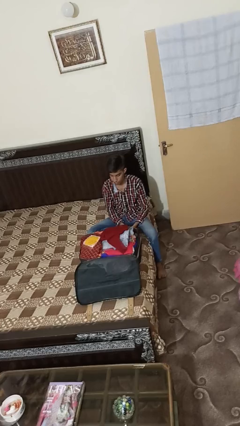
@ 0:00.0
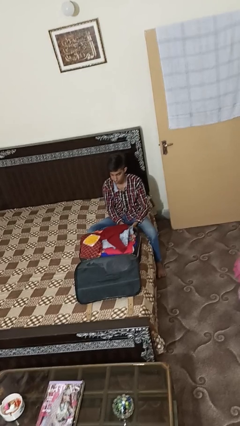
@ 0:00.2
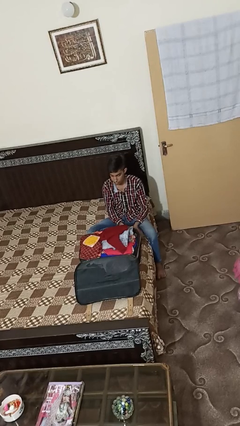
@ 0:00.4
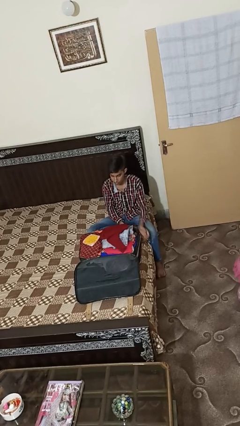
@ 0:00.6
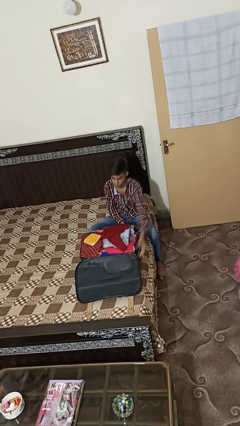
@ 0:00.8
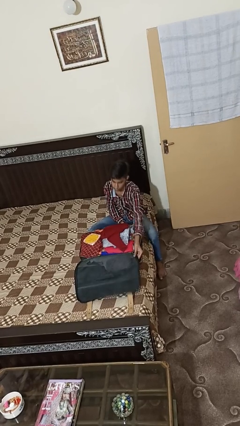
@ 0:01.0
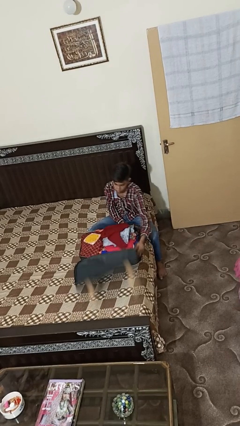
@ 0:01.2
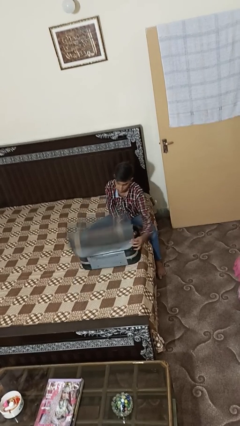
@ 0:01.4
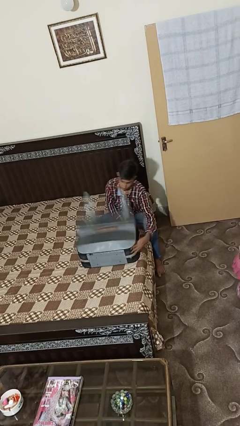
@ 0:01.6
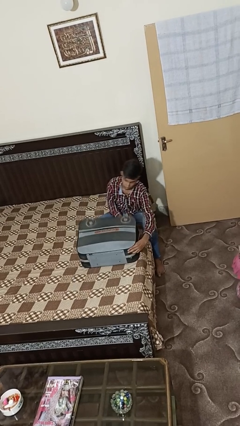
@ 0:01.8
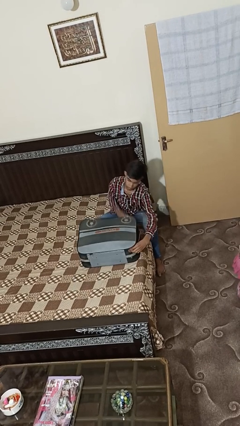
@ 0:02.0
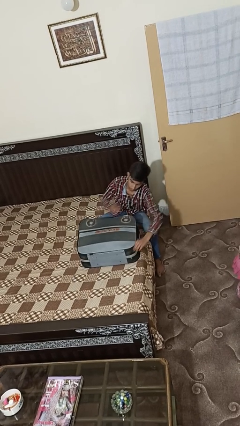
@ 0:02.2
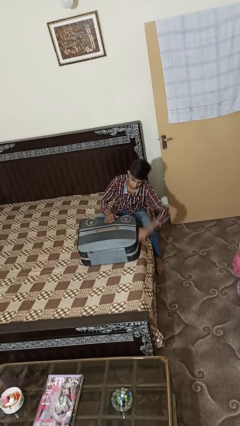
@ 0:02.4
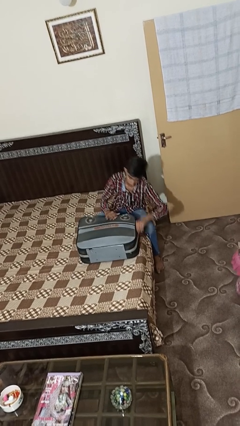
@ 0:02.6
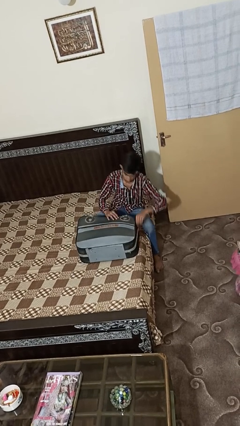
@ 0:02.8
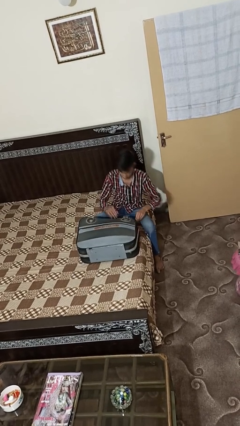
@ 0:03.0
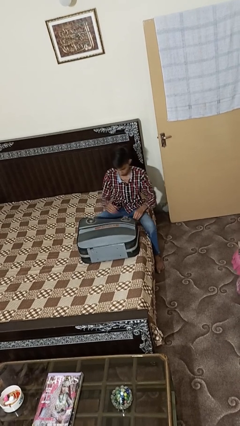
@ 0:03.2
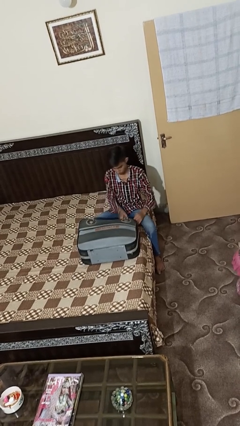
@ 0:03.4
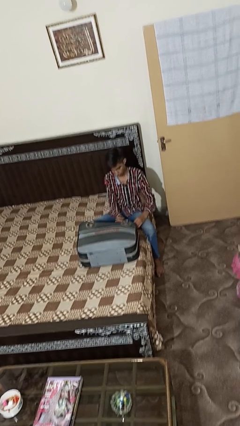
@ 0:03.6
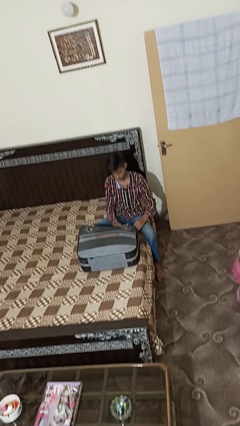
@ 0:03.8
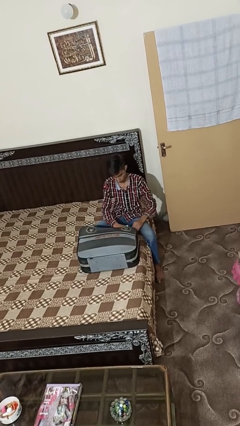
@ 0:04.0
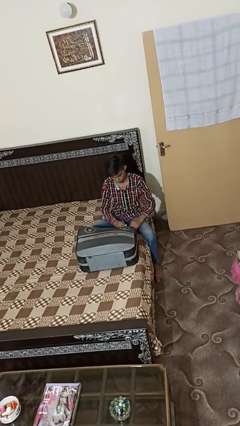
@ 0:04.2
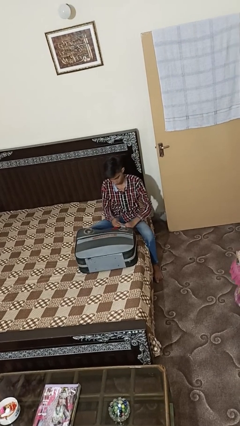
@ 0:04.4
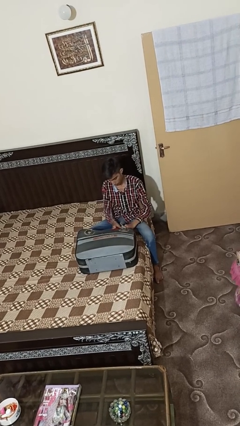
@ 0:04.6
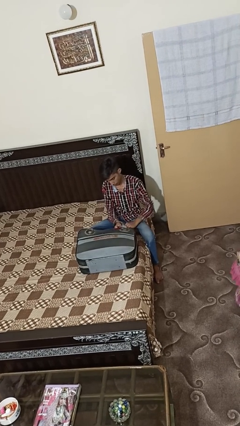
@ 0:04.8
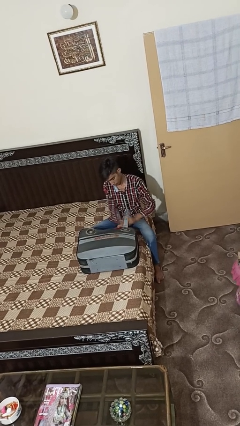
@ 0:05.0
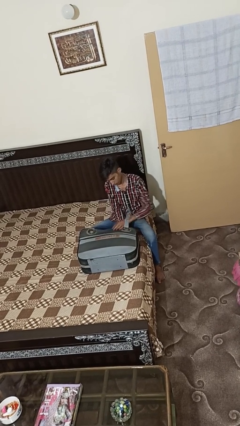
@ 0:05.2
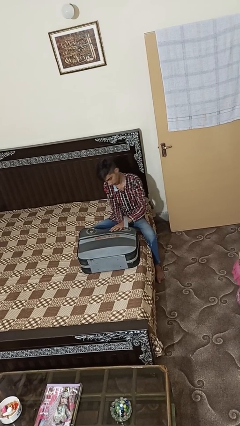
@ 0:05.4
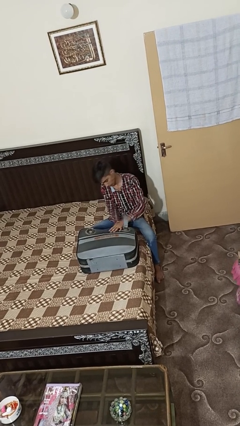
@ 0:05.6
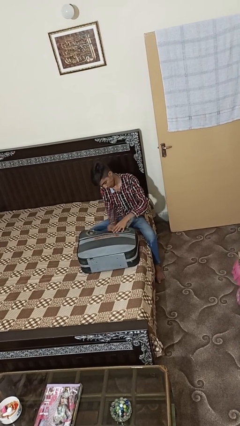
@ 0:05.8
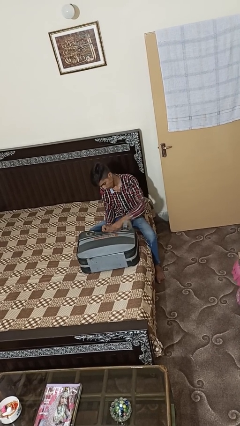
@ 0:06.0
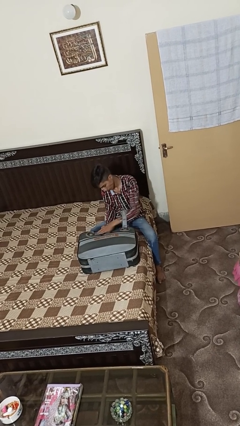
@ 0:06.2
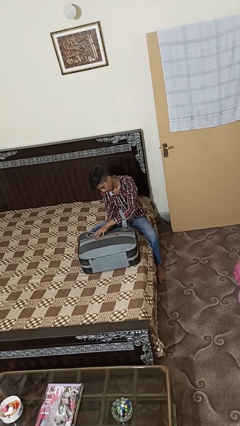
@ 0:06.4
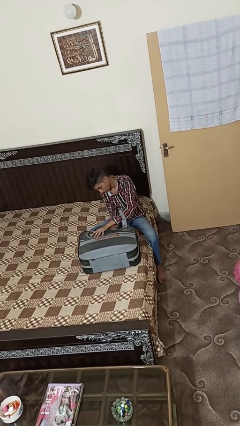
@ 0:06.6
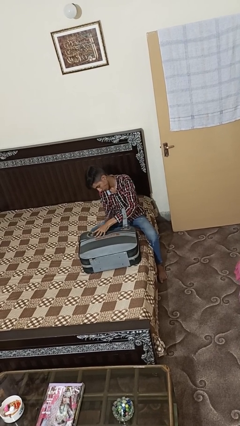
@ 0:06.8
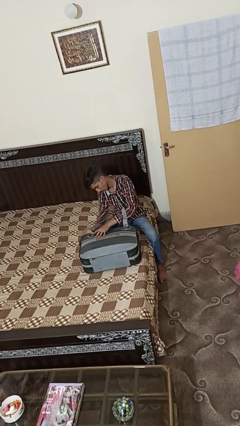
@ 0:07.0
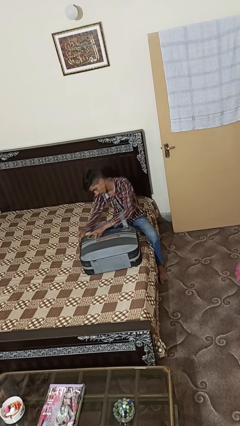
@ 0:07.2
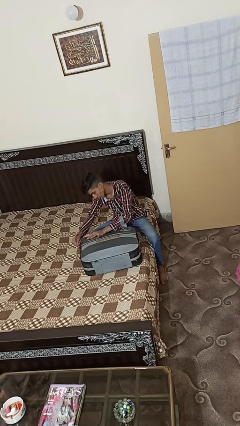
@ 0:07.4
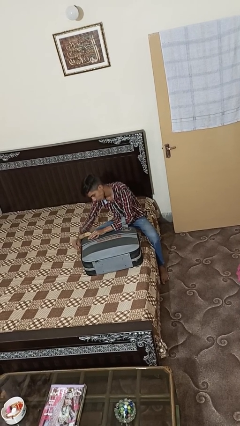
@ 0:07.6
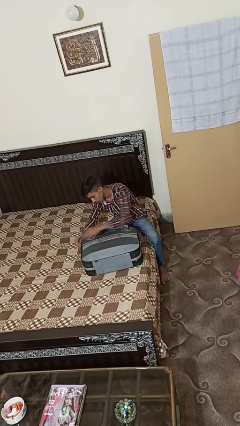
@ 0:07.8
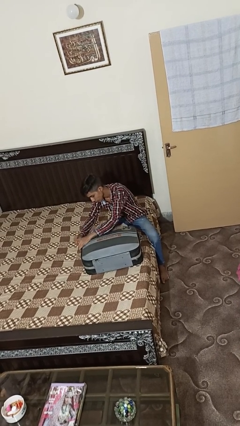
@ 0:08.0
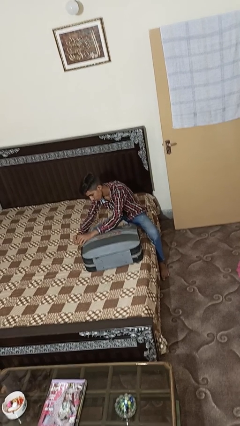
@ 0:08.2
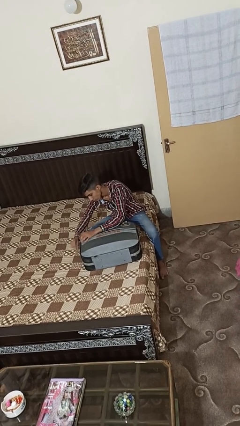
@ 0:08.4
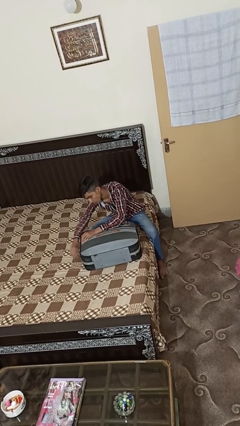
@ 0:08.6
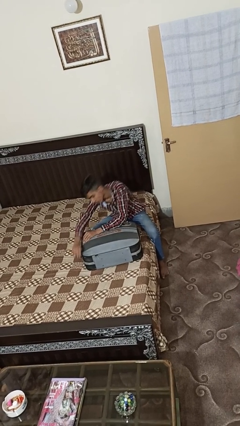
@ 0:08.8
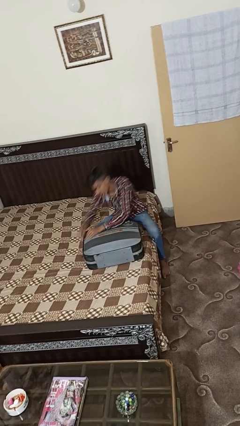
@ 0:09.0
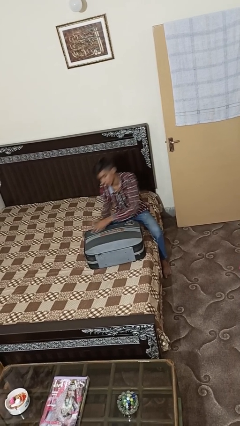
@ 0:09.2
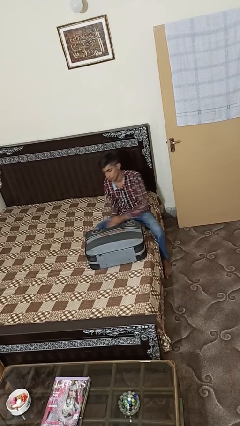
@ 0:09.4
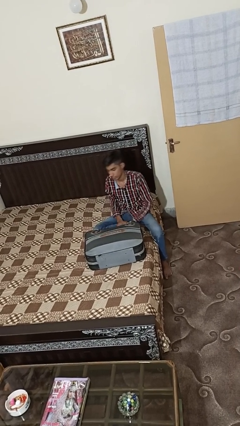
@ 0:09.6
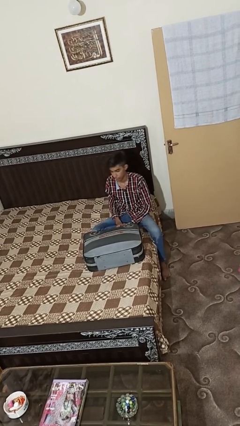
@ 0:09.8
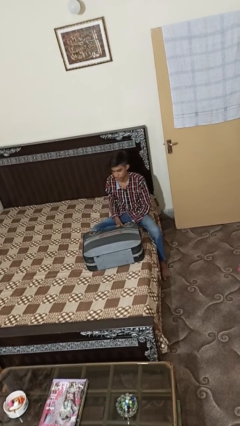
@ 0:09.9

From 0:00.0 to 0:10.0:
person closes suitcase

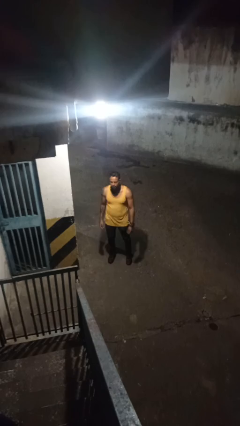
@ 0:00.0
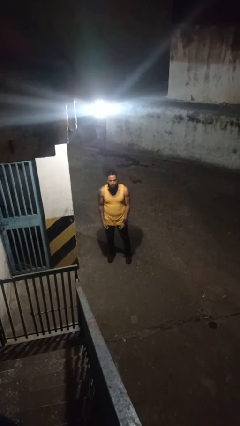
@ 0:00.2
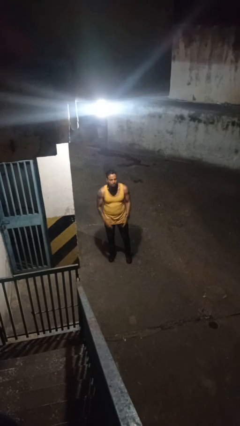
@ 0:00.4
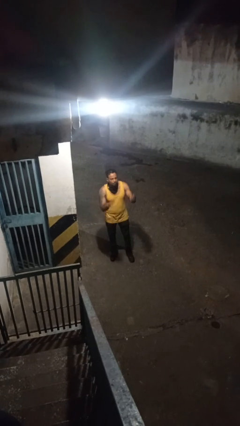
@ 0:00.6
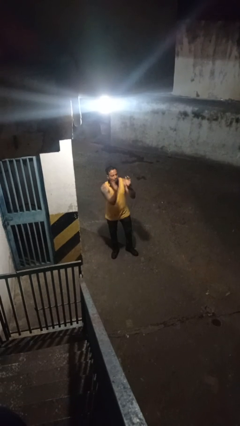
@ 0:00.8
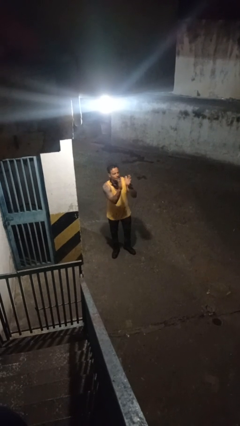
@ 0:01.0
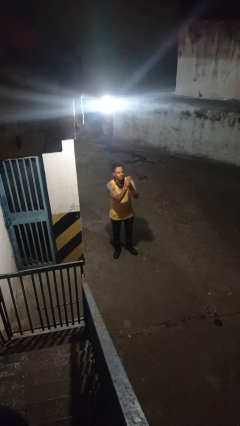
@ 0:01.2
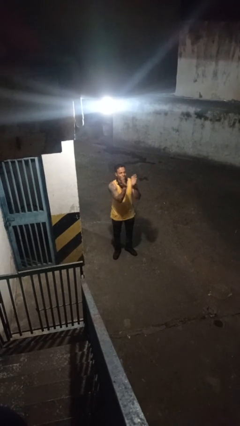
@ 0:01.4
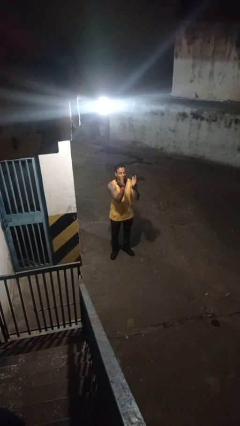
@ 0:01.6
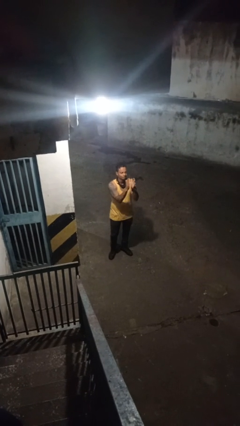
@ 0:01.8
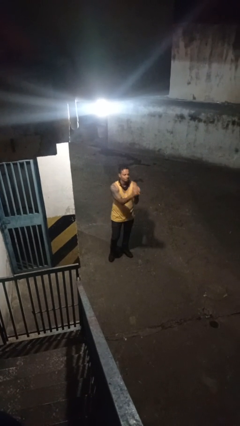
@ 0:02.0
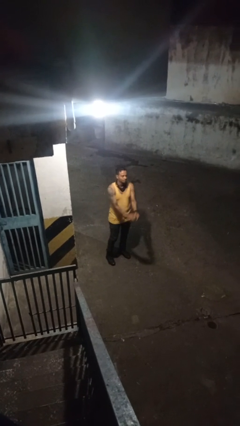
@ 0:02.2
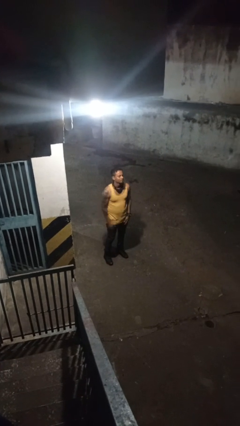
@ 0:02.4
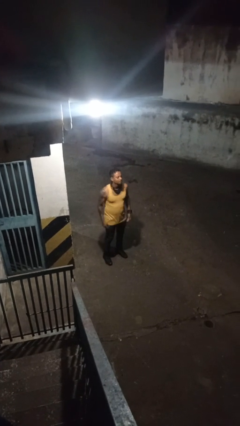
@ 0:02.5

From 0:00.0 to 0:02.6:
person claps hands

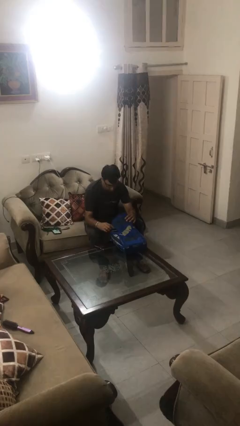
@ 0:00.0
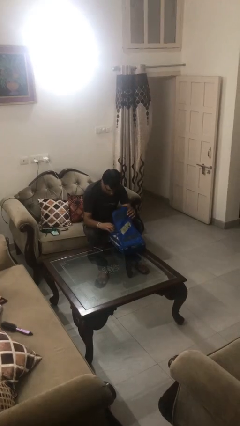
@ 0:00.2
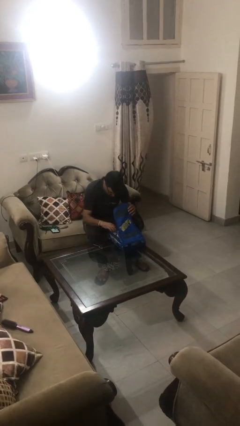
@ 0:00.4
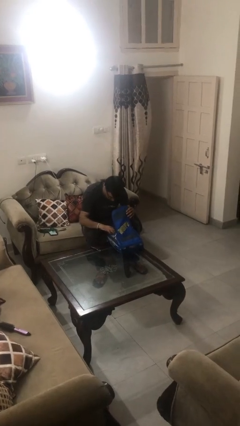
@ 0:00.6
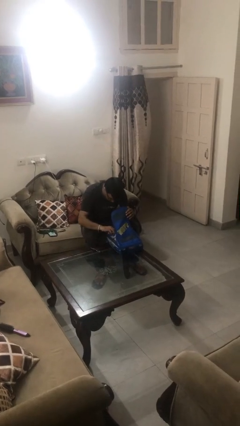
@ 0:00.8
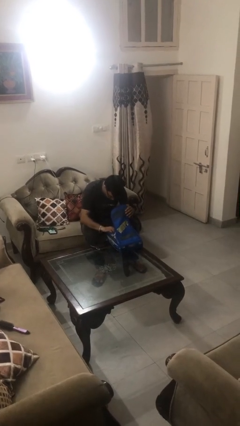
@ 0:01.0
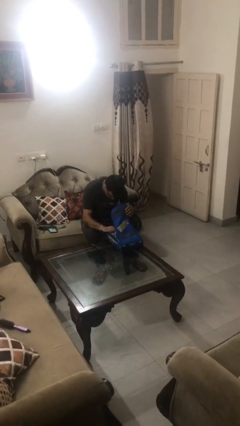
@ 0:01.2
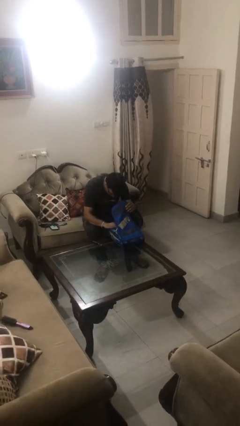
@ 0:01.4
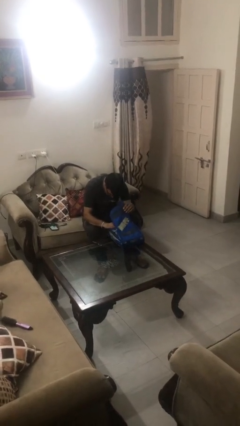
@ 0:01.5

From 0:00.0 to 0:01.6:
person searches in backpack

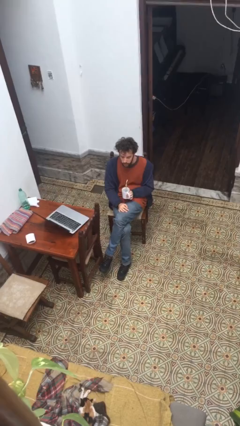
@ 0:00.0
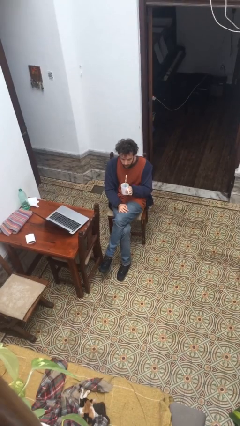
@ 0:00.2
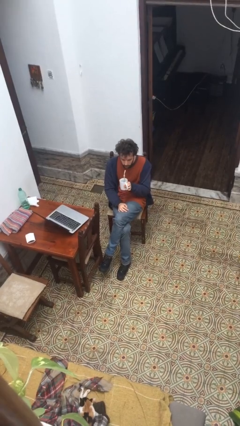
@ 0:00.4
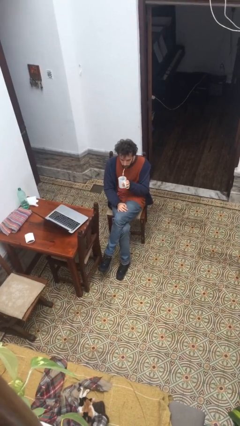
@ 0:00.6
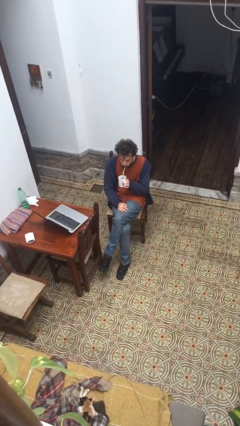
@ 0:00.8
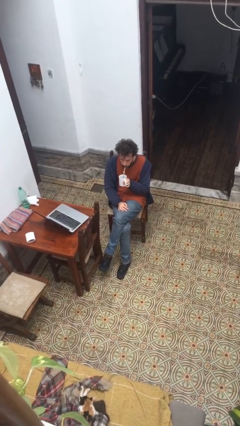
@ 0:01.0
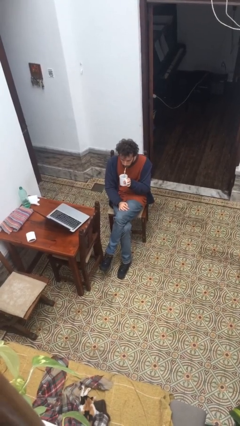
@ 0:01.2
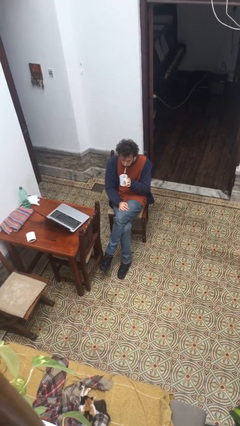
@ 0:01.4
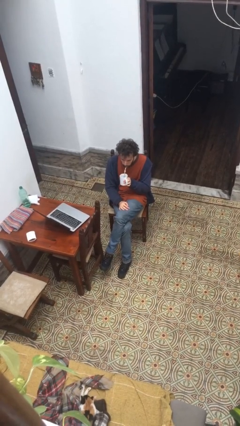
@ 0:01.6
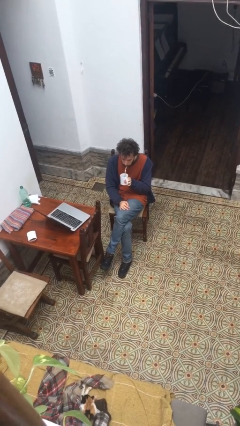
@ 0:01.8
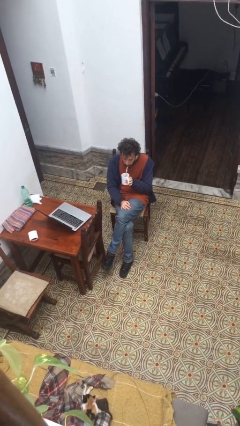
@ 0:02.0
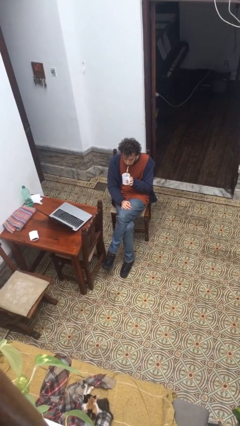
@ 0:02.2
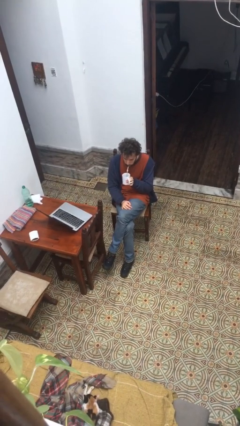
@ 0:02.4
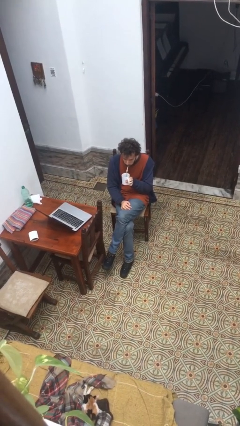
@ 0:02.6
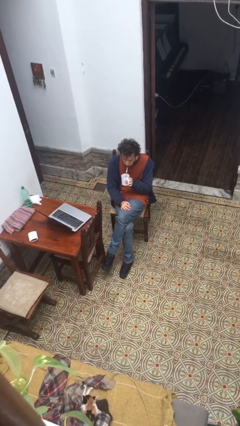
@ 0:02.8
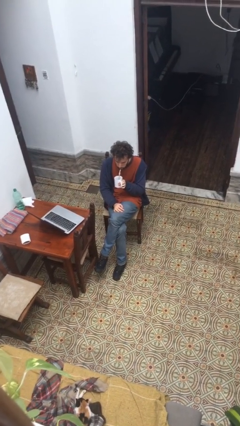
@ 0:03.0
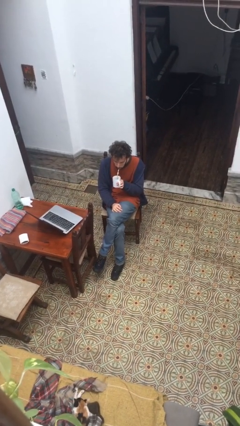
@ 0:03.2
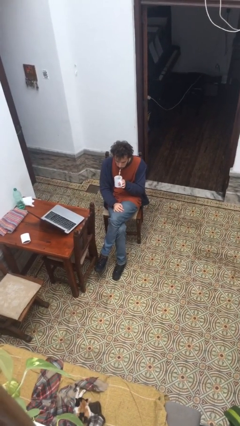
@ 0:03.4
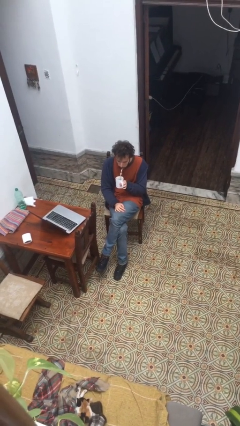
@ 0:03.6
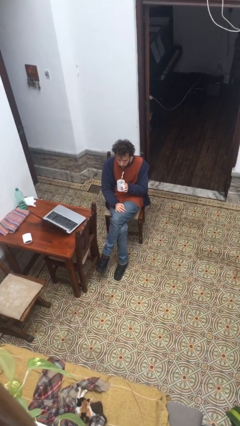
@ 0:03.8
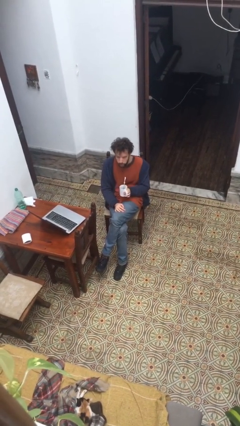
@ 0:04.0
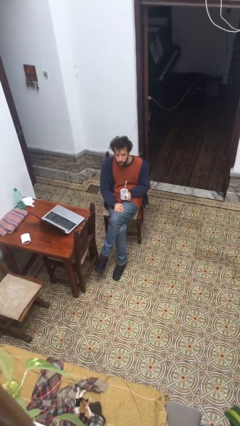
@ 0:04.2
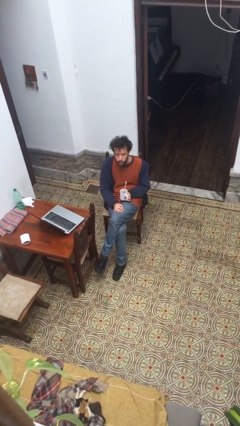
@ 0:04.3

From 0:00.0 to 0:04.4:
person drinks from straw
